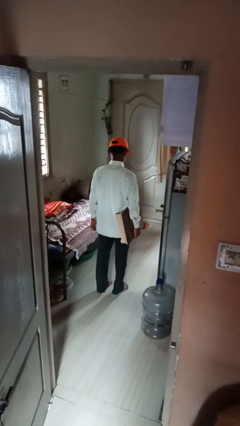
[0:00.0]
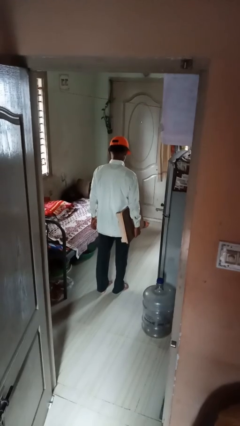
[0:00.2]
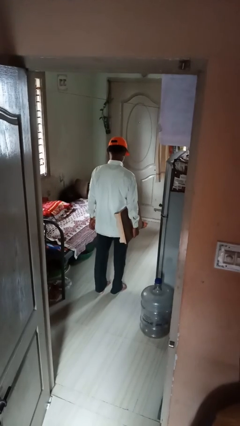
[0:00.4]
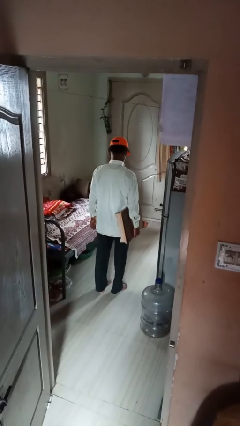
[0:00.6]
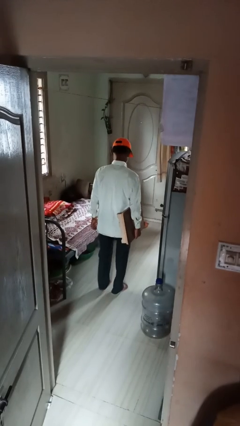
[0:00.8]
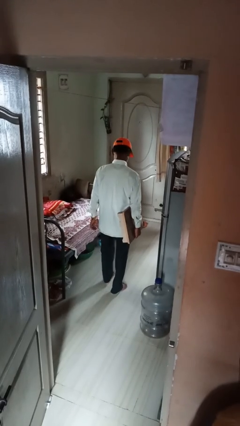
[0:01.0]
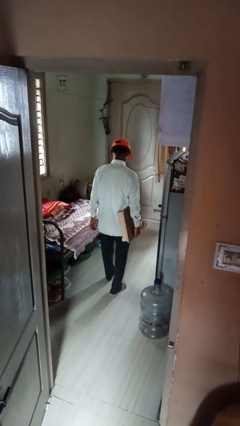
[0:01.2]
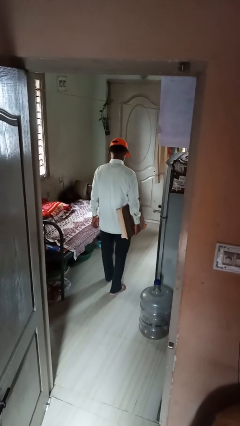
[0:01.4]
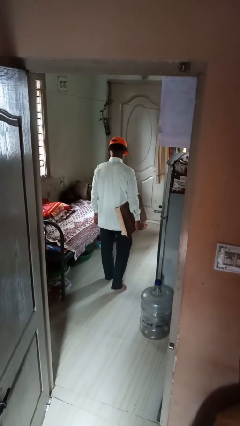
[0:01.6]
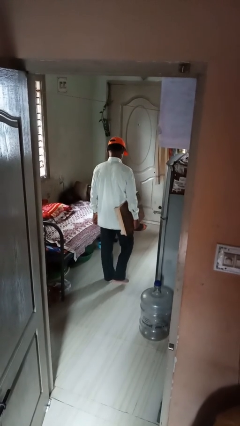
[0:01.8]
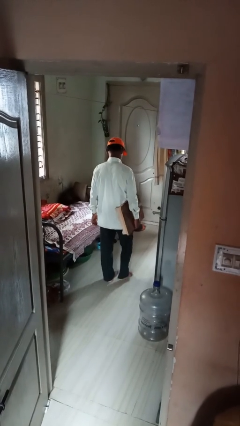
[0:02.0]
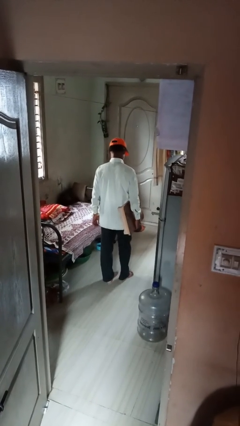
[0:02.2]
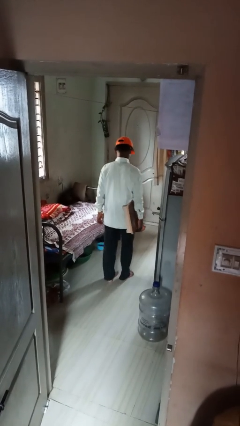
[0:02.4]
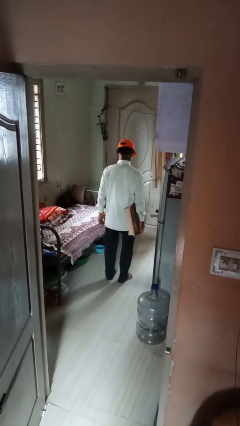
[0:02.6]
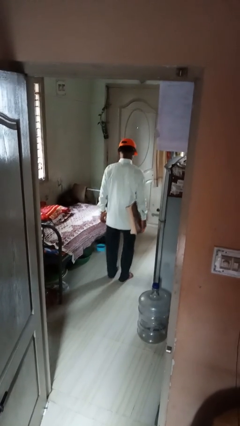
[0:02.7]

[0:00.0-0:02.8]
person carries furniture

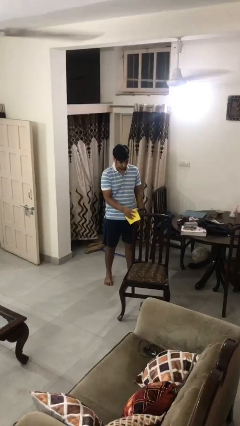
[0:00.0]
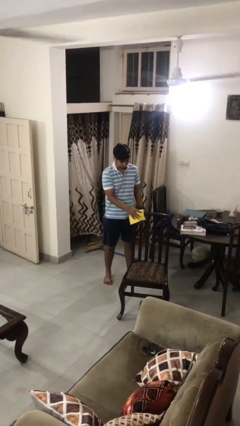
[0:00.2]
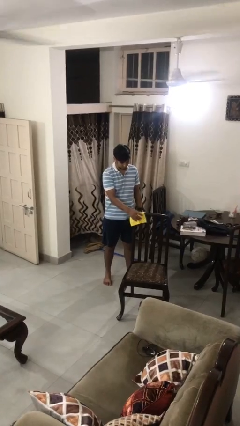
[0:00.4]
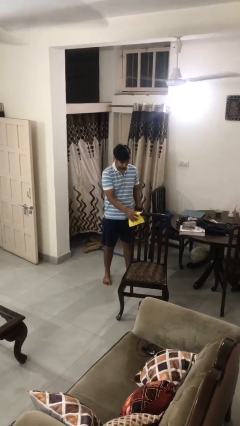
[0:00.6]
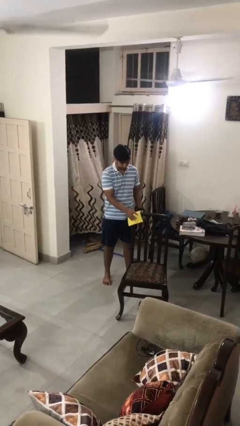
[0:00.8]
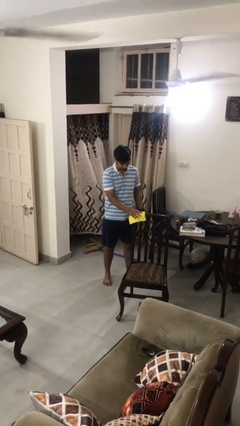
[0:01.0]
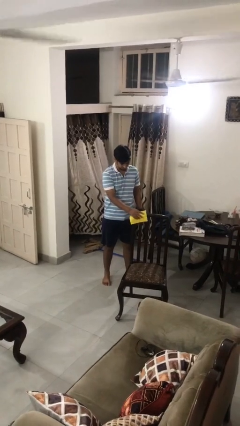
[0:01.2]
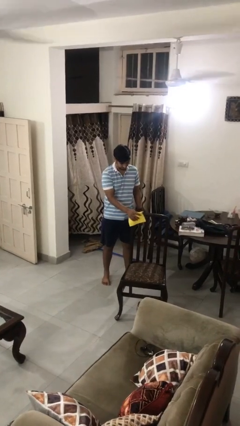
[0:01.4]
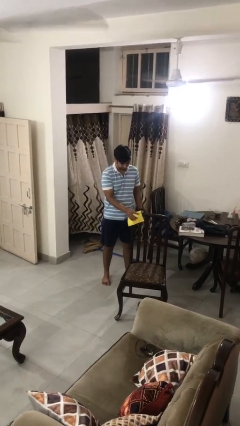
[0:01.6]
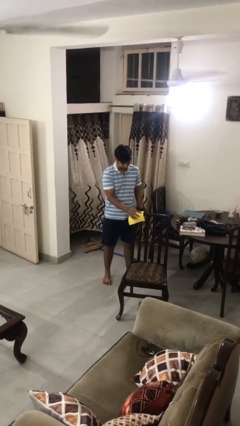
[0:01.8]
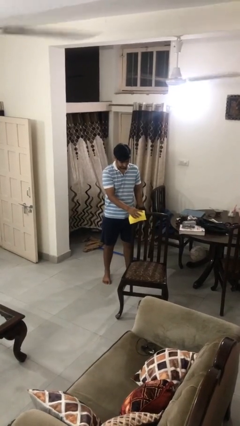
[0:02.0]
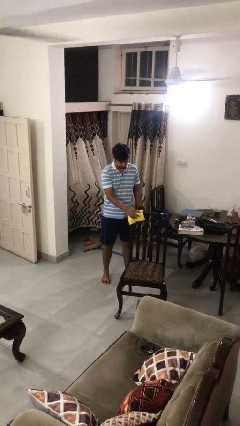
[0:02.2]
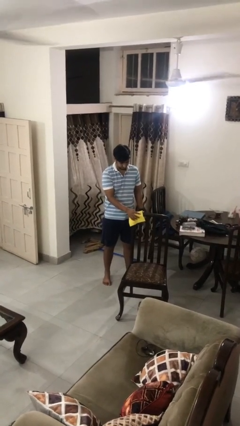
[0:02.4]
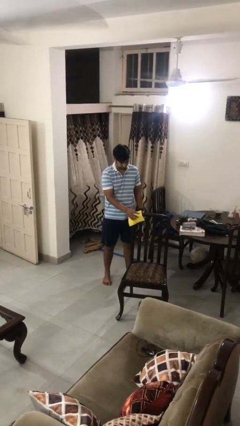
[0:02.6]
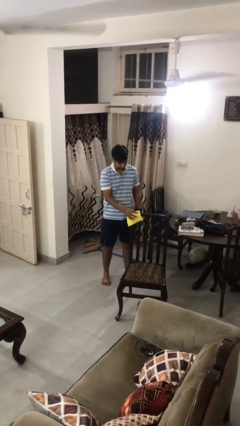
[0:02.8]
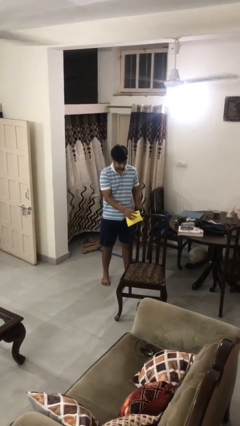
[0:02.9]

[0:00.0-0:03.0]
person dusts furniture

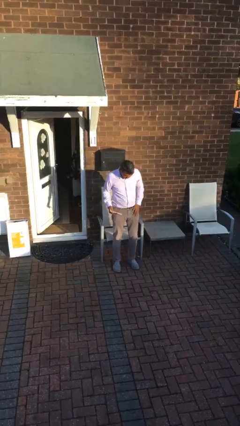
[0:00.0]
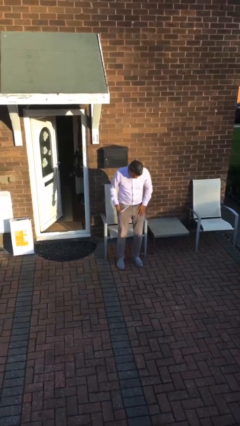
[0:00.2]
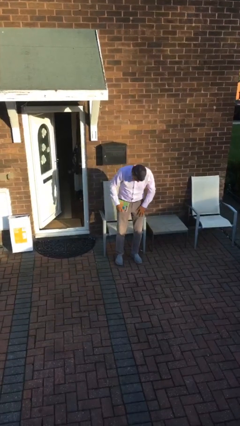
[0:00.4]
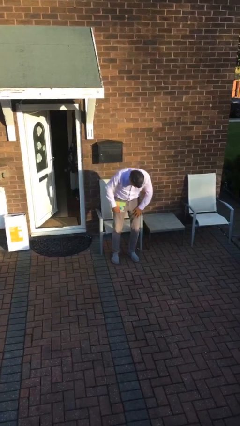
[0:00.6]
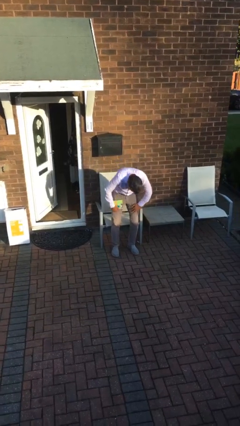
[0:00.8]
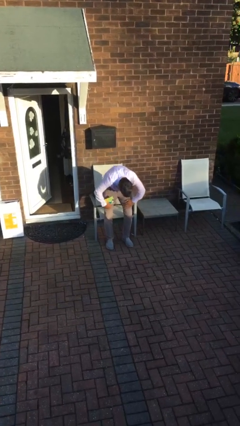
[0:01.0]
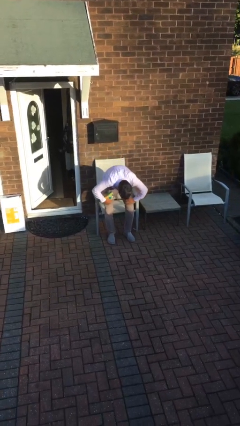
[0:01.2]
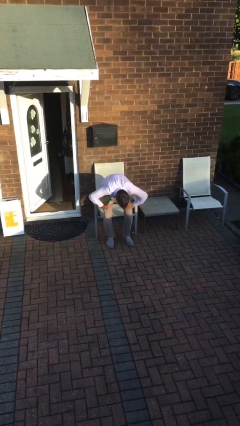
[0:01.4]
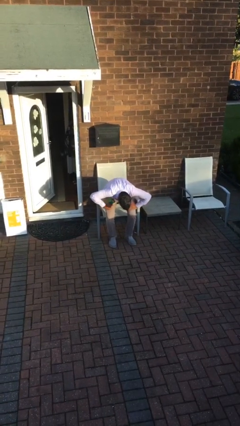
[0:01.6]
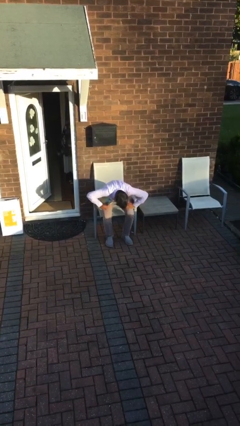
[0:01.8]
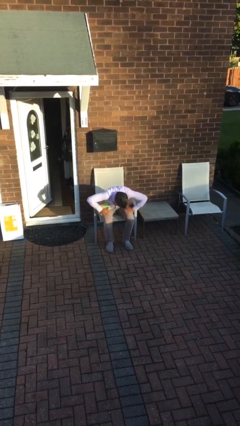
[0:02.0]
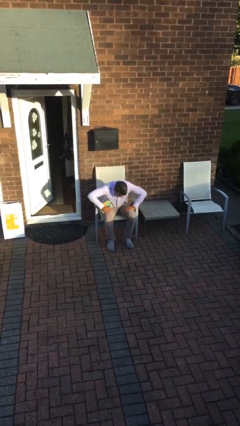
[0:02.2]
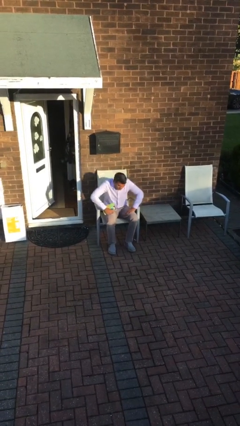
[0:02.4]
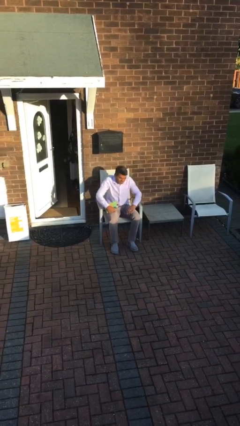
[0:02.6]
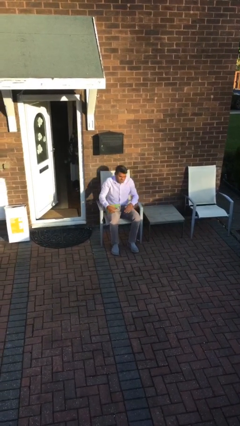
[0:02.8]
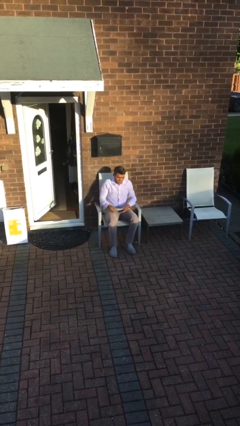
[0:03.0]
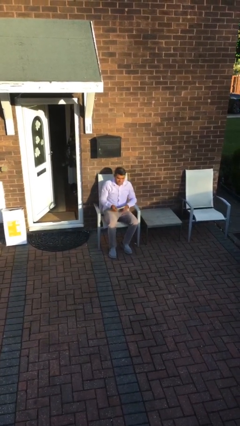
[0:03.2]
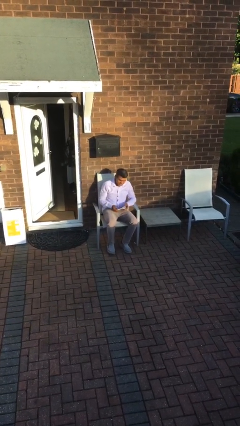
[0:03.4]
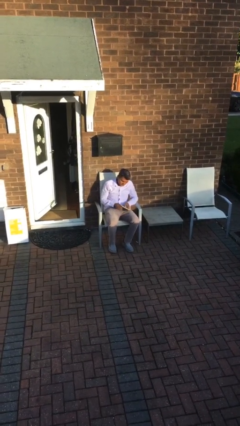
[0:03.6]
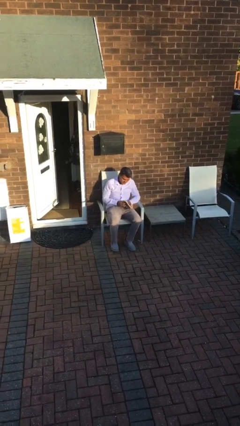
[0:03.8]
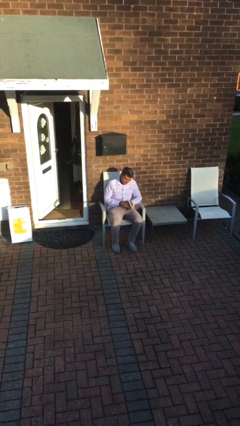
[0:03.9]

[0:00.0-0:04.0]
person sits down

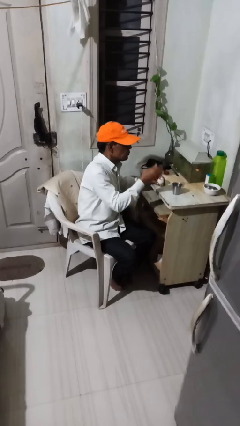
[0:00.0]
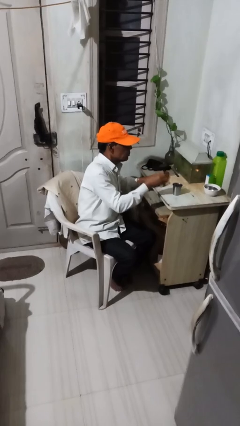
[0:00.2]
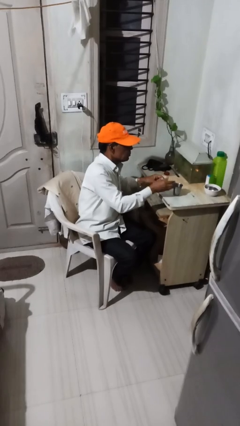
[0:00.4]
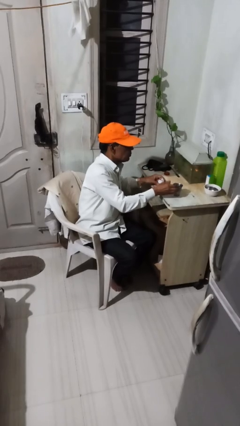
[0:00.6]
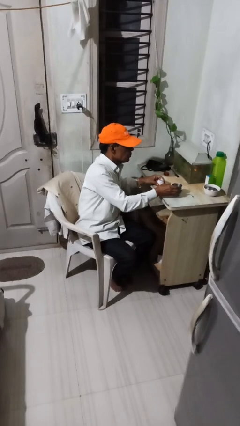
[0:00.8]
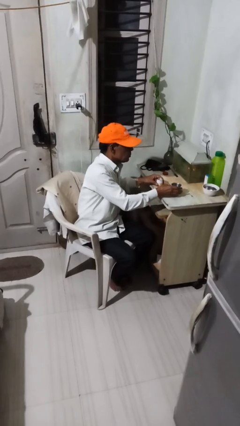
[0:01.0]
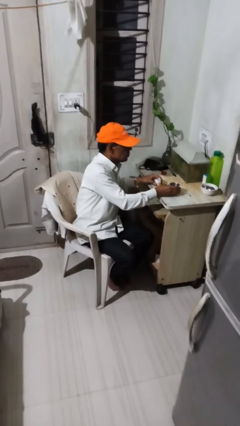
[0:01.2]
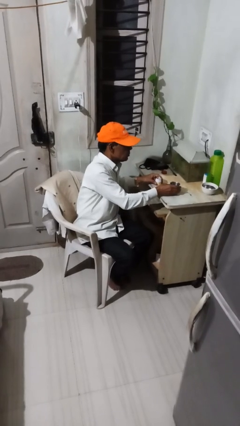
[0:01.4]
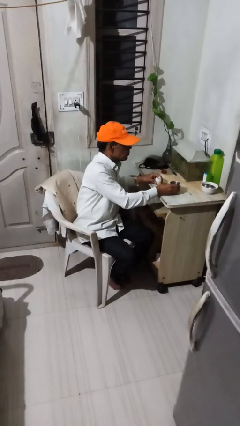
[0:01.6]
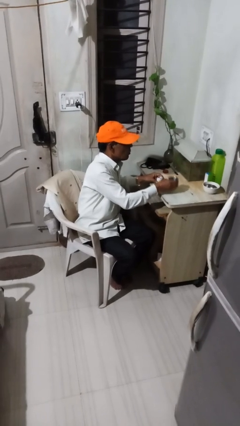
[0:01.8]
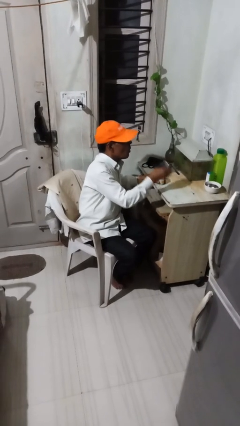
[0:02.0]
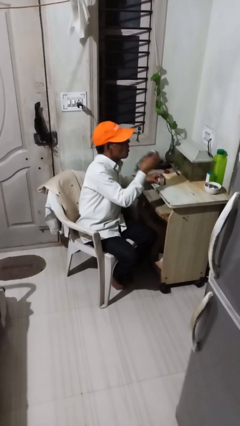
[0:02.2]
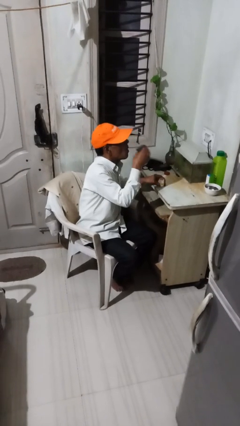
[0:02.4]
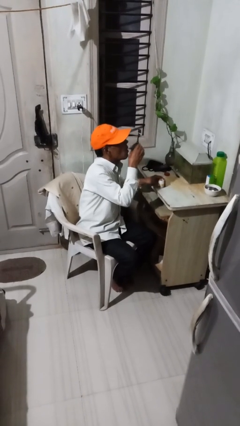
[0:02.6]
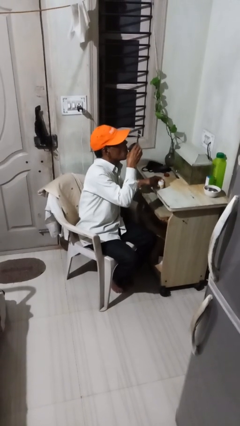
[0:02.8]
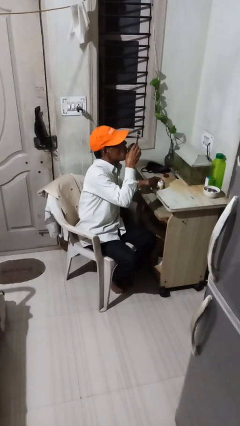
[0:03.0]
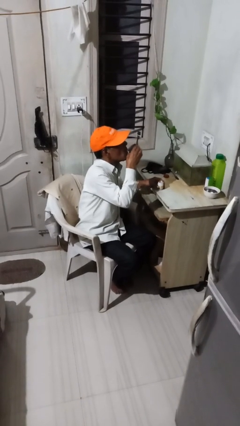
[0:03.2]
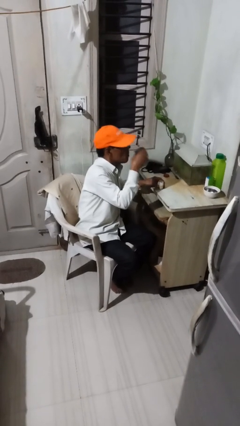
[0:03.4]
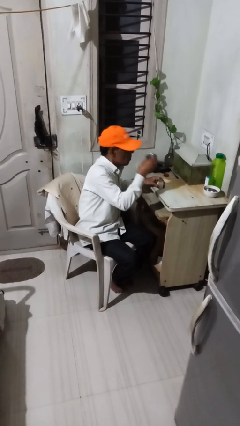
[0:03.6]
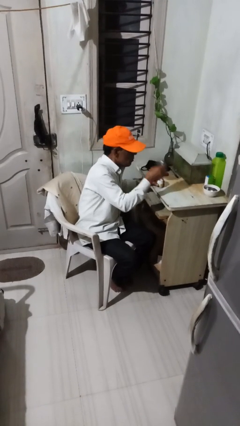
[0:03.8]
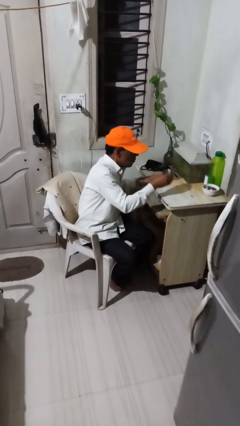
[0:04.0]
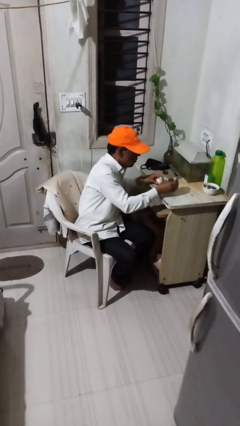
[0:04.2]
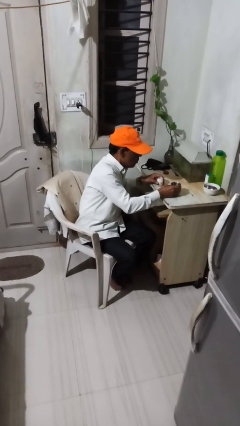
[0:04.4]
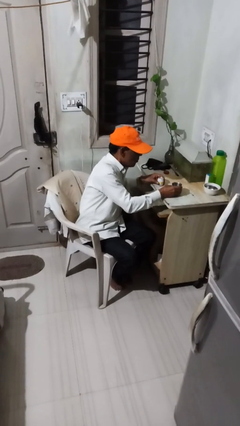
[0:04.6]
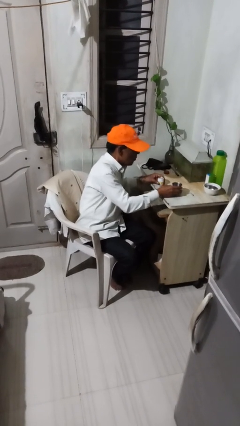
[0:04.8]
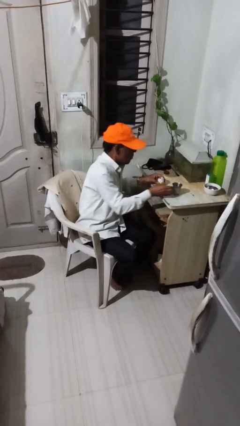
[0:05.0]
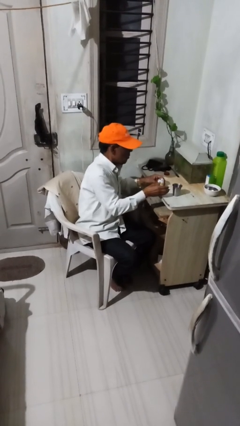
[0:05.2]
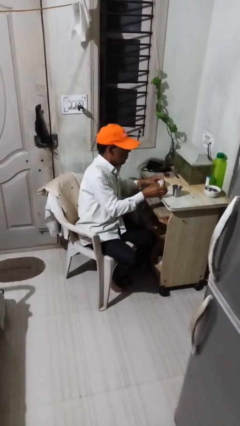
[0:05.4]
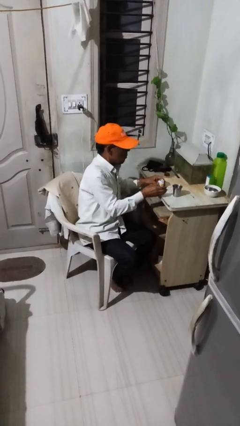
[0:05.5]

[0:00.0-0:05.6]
person folds socks

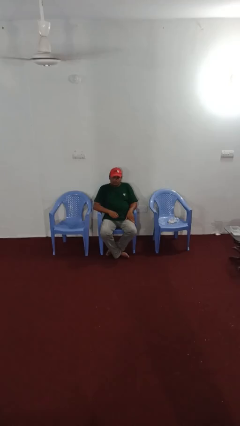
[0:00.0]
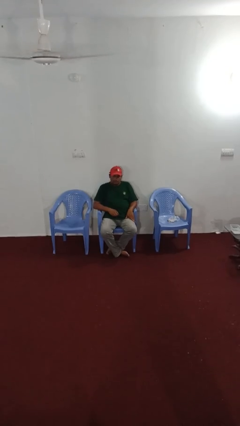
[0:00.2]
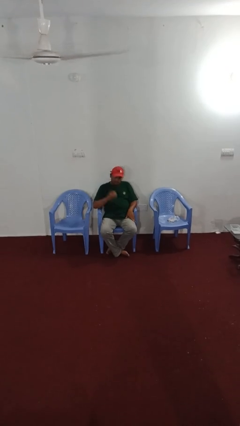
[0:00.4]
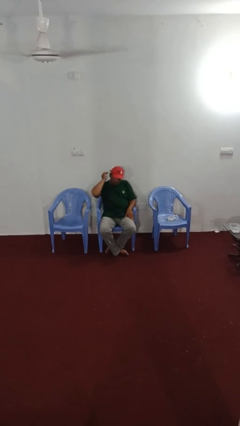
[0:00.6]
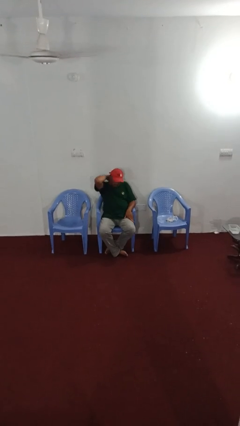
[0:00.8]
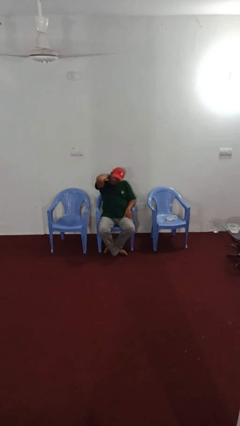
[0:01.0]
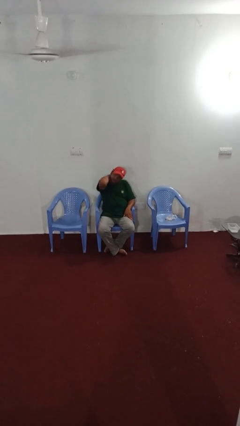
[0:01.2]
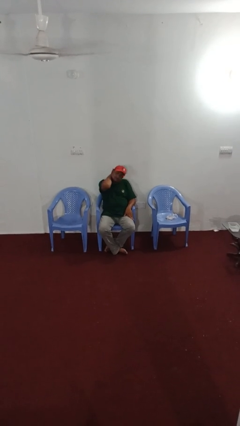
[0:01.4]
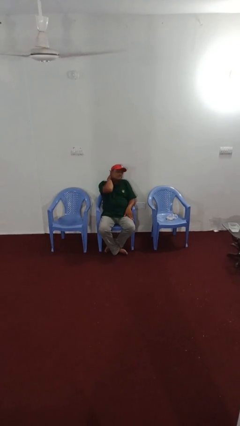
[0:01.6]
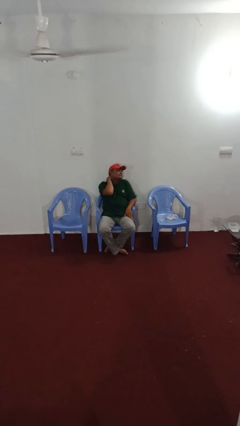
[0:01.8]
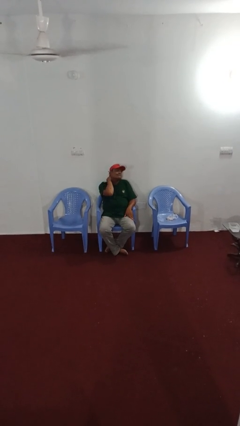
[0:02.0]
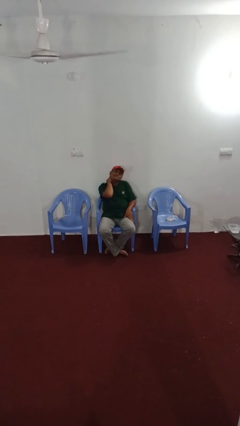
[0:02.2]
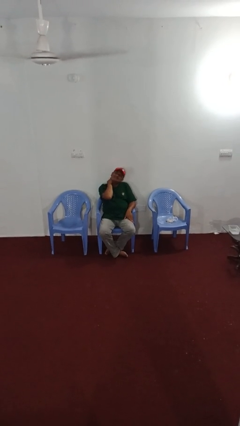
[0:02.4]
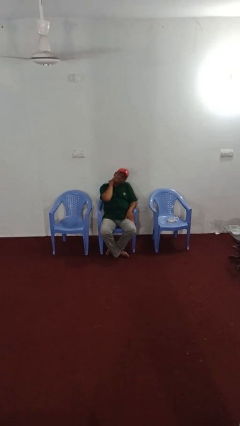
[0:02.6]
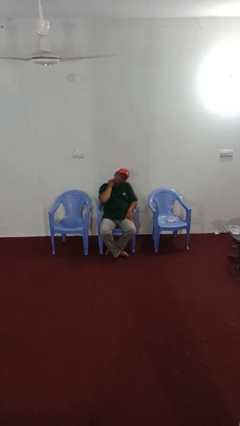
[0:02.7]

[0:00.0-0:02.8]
person rubs neck
